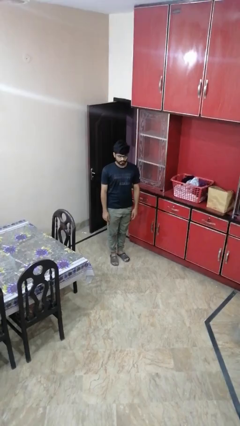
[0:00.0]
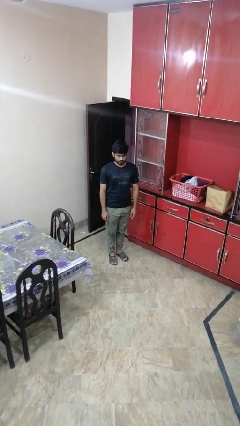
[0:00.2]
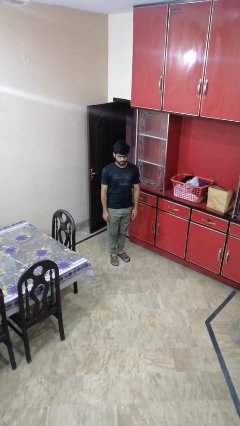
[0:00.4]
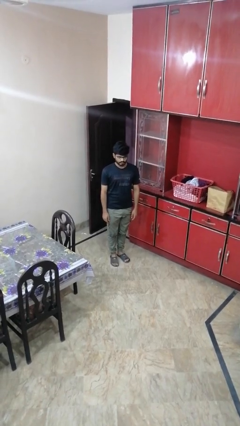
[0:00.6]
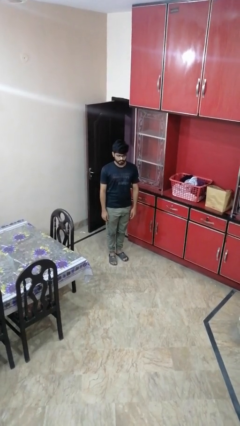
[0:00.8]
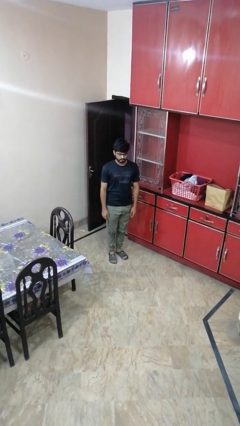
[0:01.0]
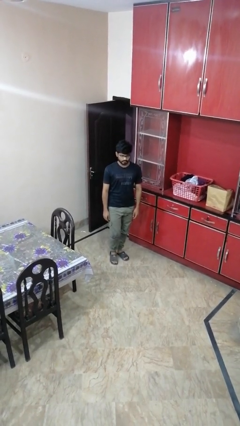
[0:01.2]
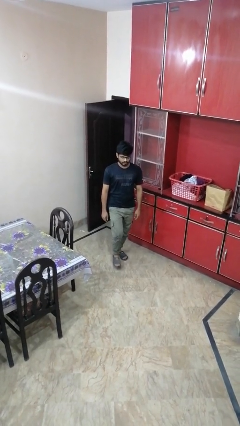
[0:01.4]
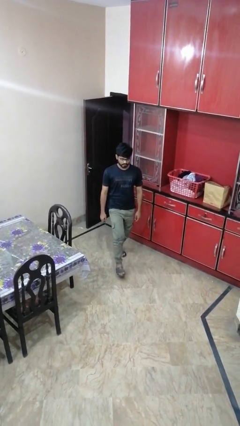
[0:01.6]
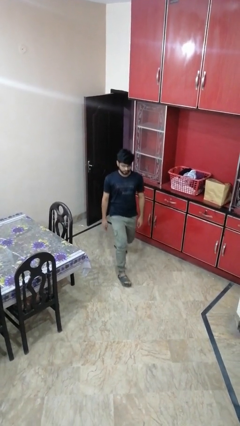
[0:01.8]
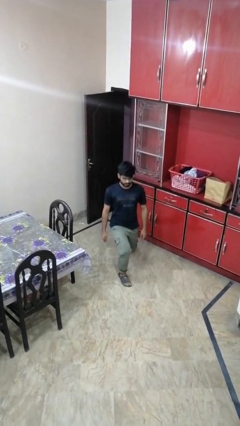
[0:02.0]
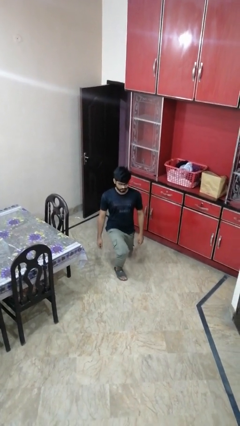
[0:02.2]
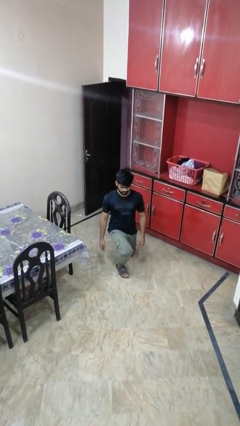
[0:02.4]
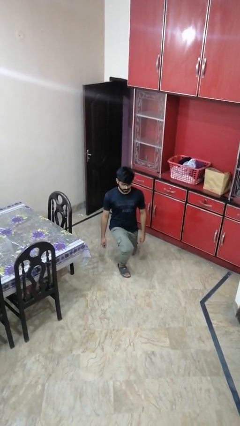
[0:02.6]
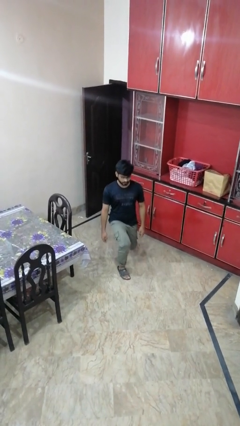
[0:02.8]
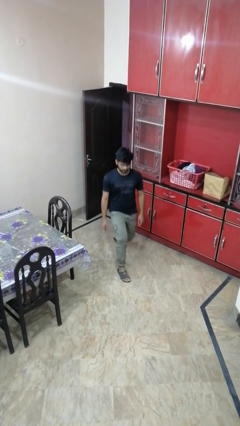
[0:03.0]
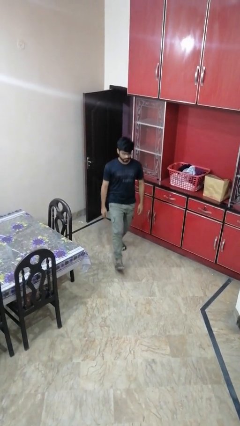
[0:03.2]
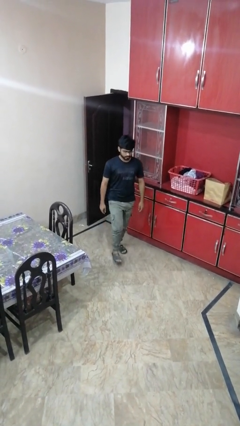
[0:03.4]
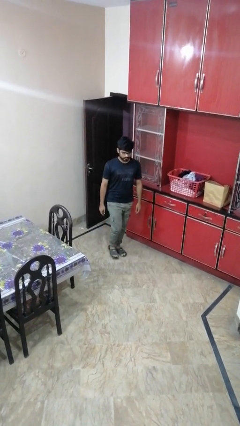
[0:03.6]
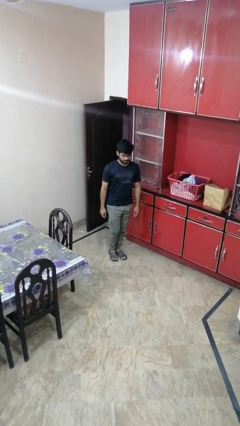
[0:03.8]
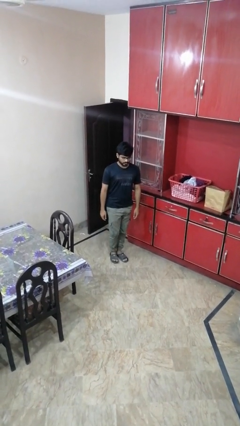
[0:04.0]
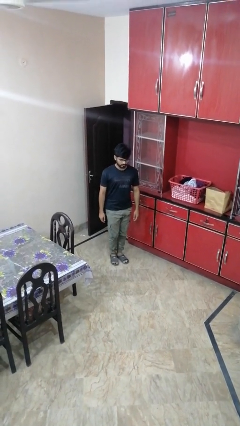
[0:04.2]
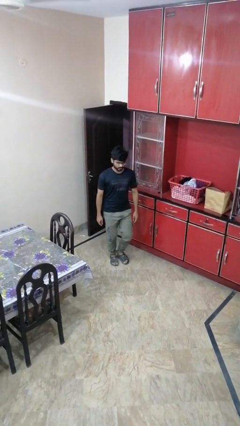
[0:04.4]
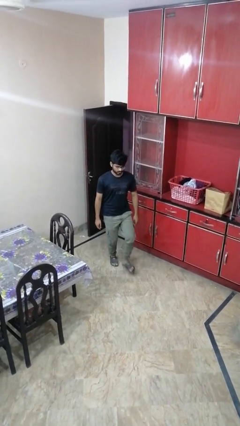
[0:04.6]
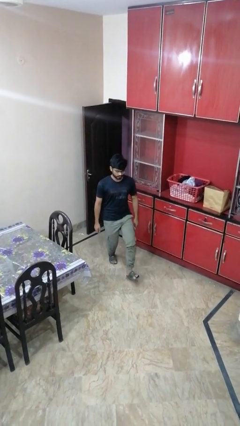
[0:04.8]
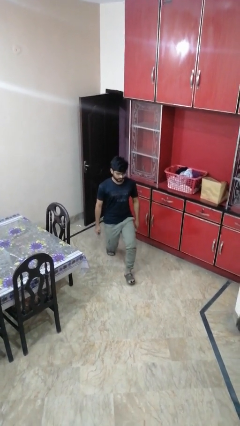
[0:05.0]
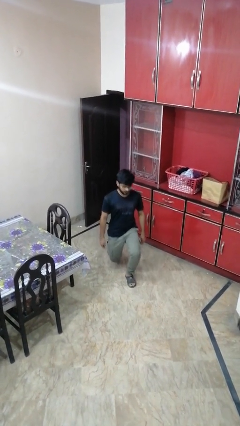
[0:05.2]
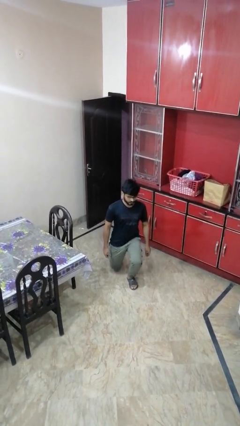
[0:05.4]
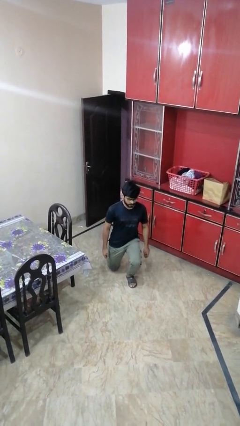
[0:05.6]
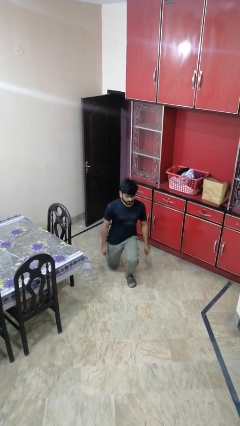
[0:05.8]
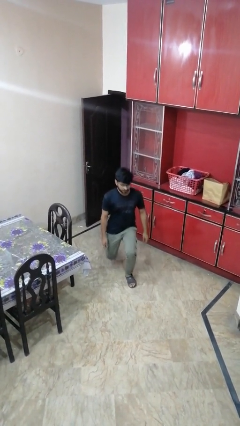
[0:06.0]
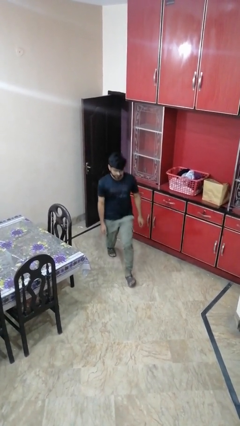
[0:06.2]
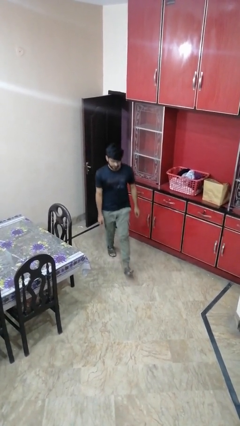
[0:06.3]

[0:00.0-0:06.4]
person exercises with lunges

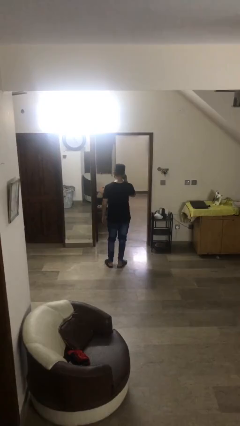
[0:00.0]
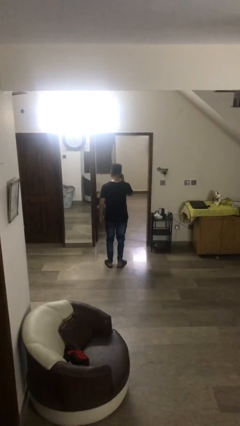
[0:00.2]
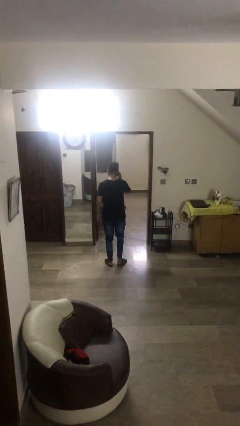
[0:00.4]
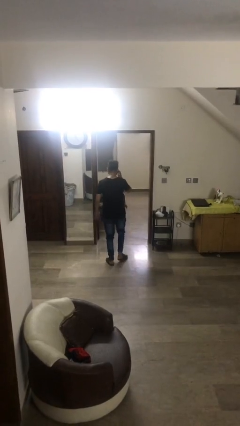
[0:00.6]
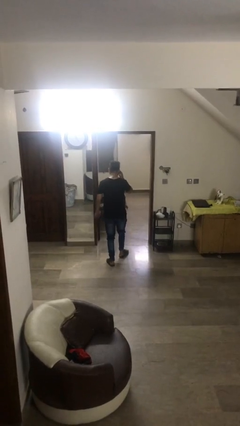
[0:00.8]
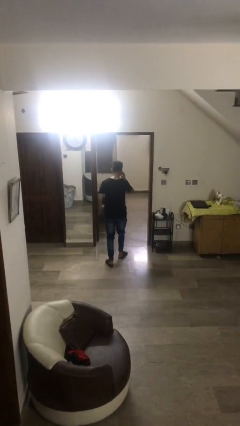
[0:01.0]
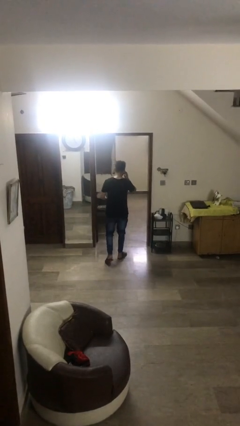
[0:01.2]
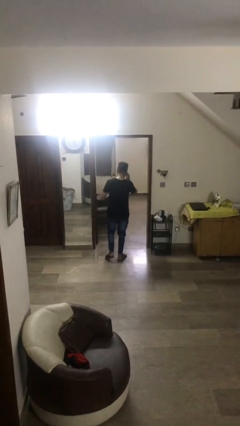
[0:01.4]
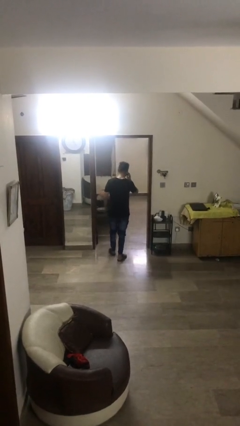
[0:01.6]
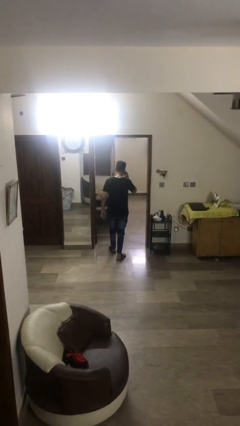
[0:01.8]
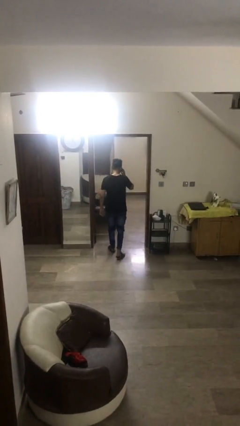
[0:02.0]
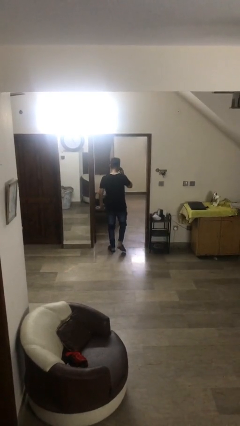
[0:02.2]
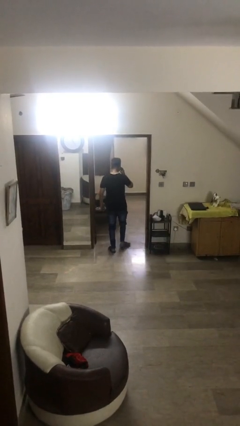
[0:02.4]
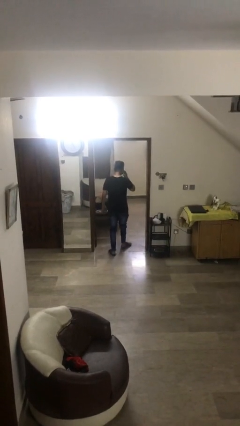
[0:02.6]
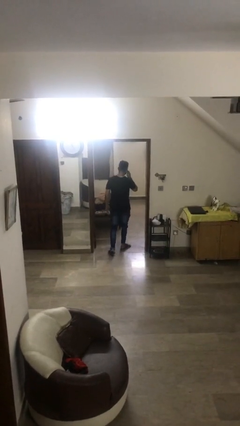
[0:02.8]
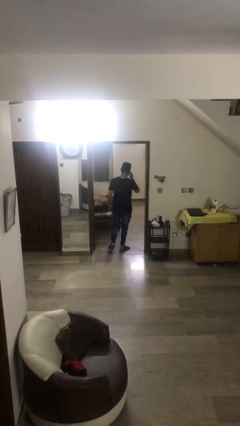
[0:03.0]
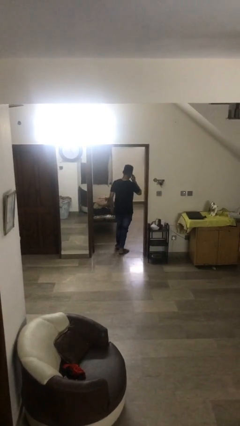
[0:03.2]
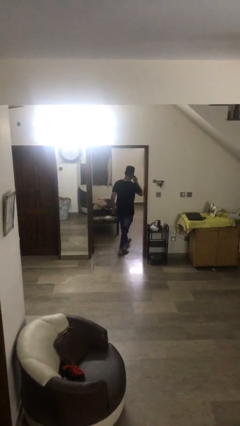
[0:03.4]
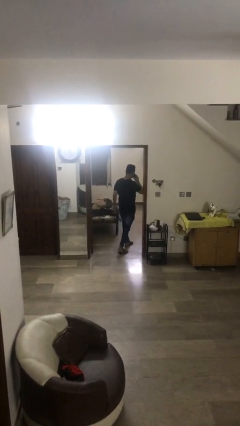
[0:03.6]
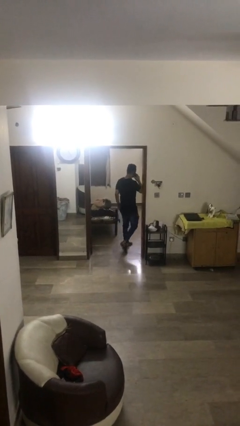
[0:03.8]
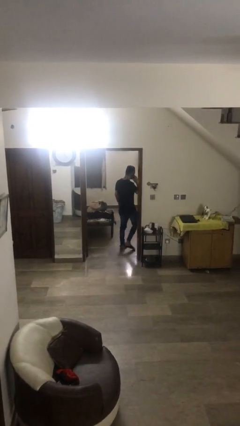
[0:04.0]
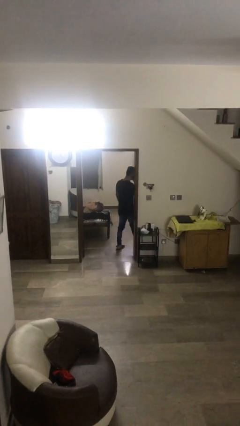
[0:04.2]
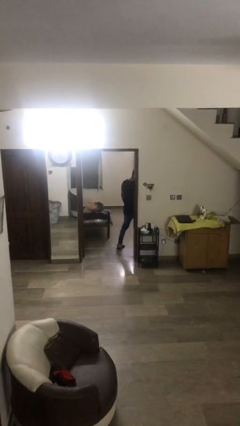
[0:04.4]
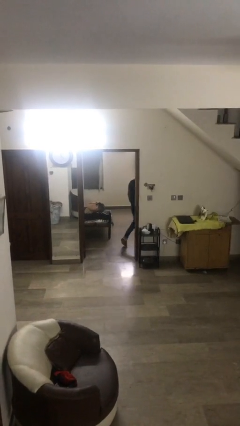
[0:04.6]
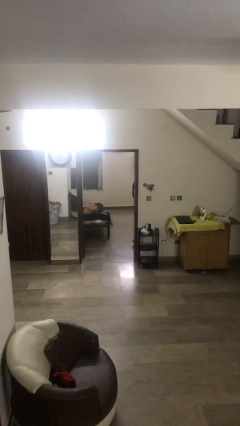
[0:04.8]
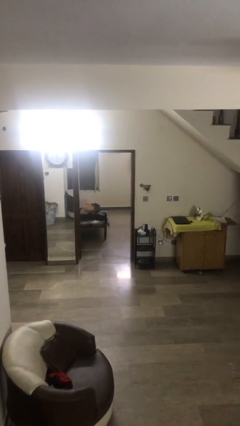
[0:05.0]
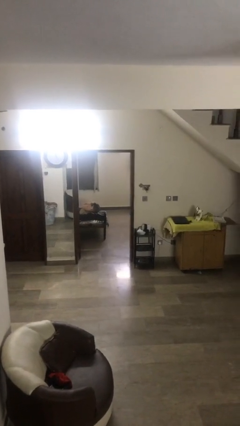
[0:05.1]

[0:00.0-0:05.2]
person exits scene through structure

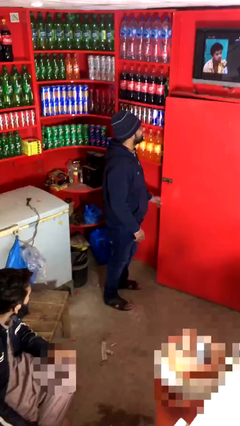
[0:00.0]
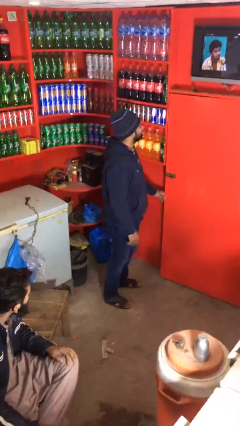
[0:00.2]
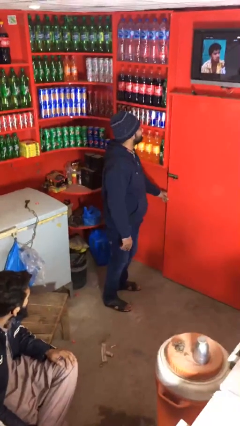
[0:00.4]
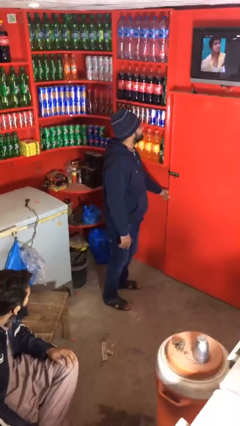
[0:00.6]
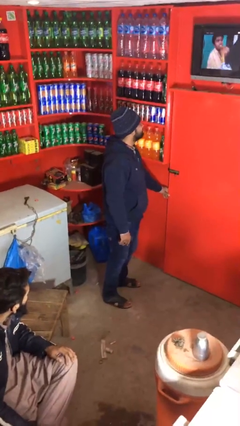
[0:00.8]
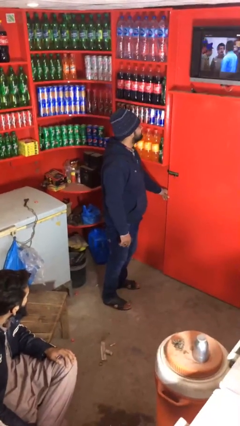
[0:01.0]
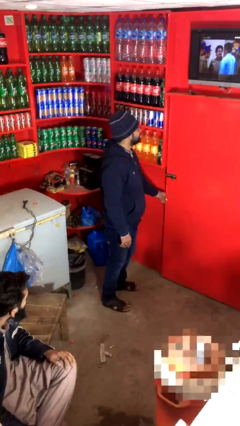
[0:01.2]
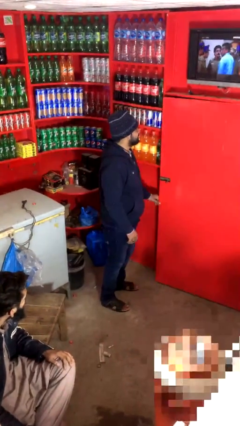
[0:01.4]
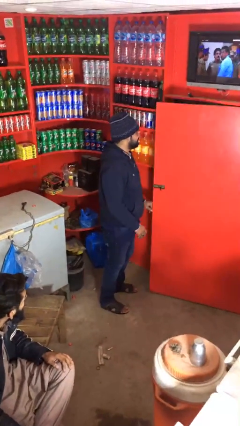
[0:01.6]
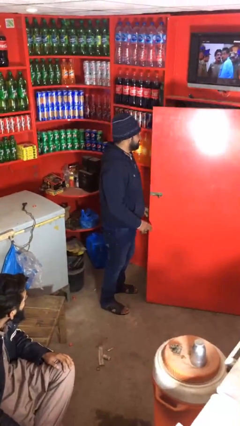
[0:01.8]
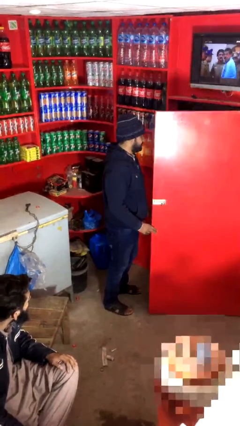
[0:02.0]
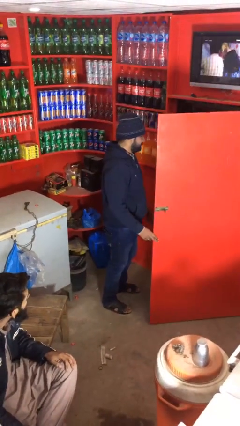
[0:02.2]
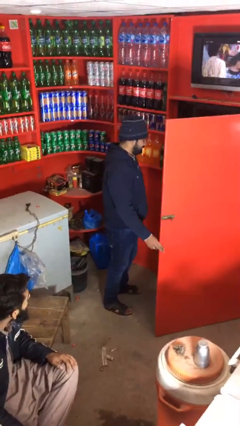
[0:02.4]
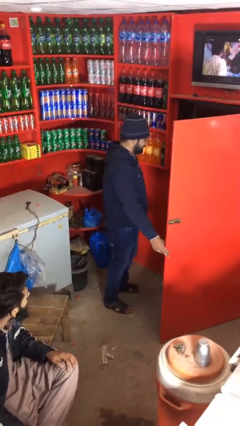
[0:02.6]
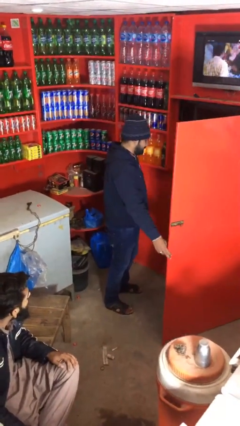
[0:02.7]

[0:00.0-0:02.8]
person opens facility door

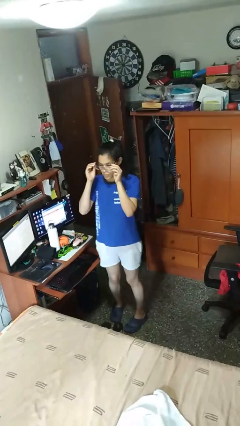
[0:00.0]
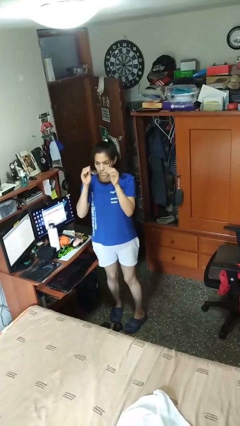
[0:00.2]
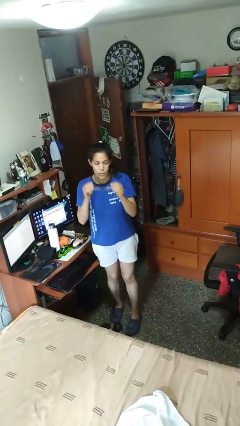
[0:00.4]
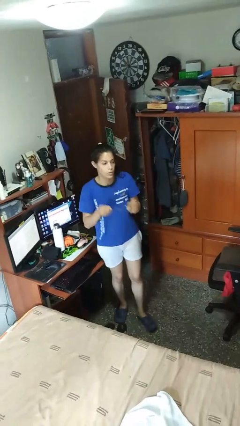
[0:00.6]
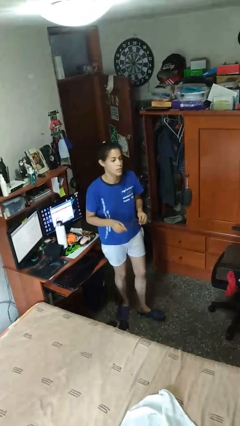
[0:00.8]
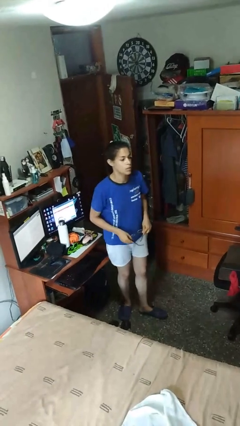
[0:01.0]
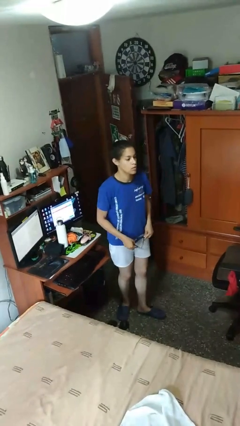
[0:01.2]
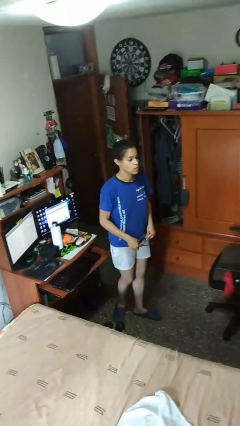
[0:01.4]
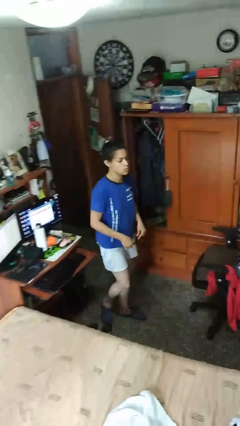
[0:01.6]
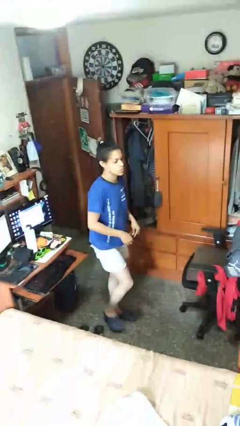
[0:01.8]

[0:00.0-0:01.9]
person takes off glasses

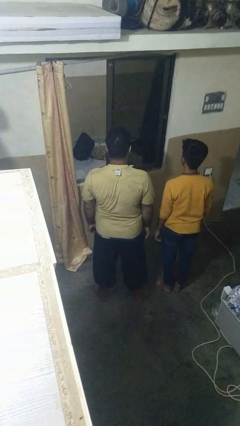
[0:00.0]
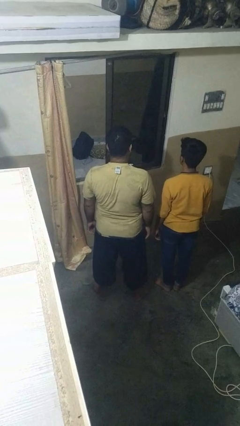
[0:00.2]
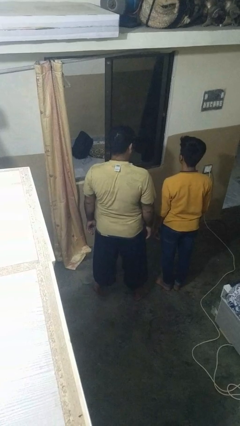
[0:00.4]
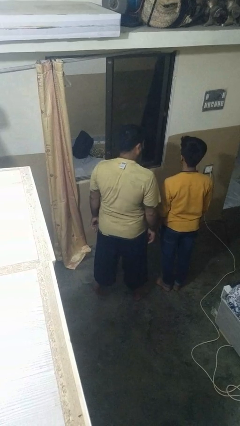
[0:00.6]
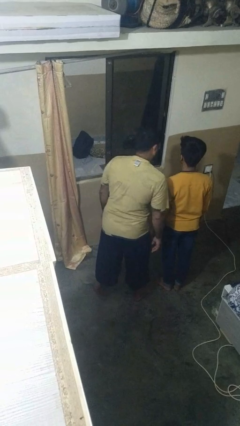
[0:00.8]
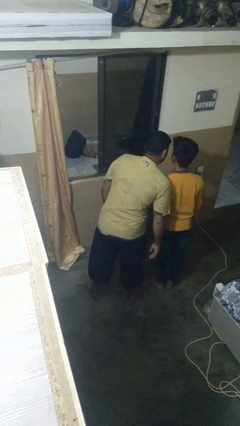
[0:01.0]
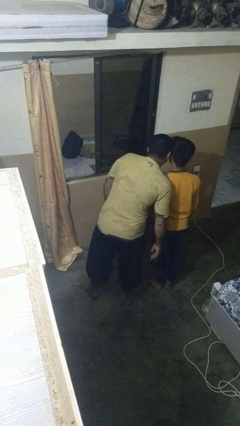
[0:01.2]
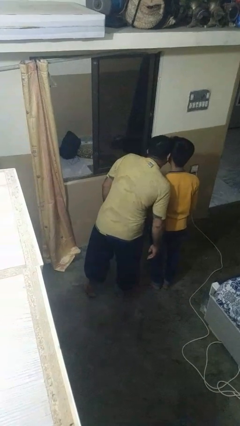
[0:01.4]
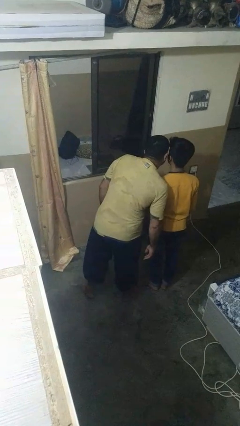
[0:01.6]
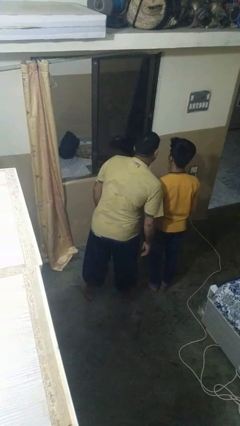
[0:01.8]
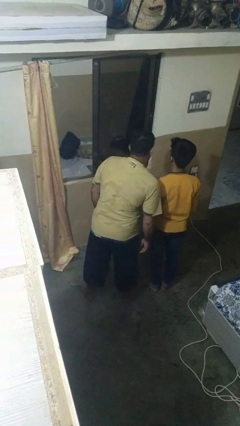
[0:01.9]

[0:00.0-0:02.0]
person kisses cheek of person
